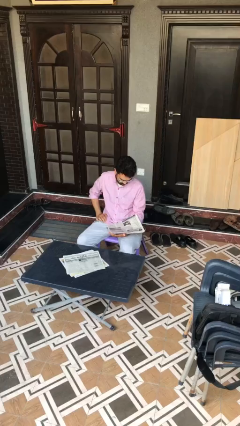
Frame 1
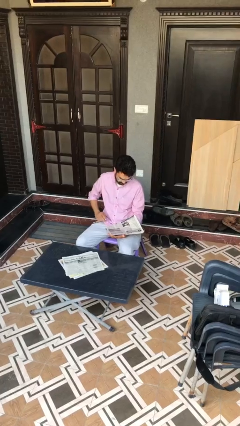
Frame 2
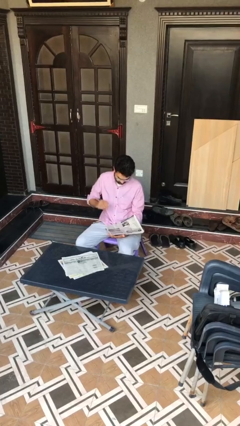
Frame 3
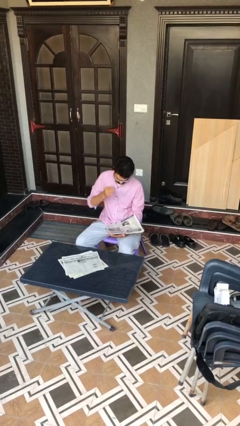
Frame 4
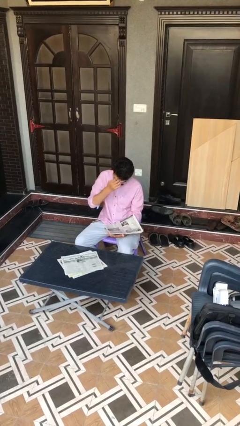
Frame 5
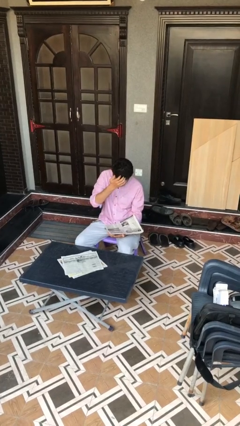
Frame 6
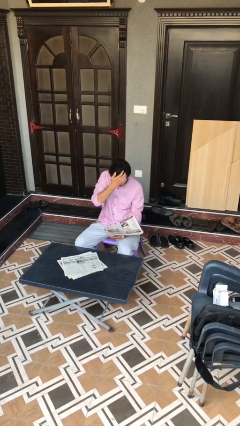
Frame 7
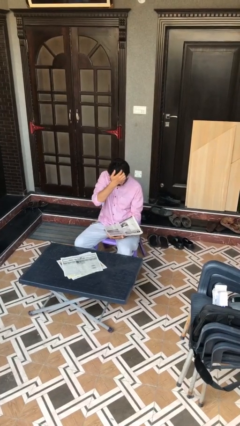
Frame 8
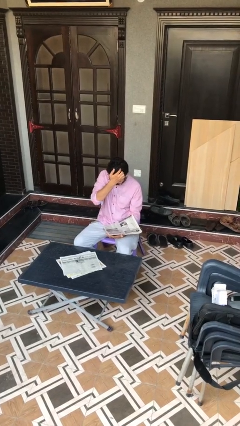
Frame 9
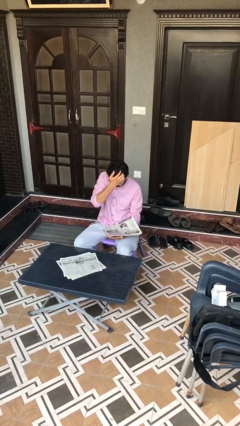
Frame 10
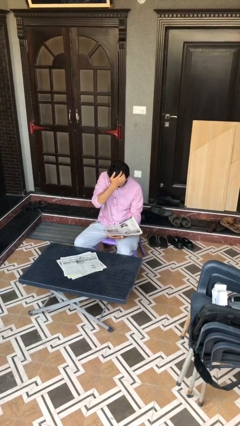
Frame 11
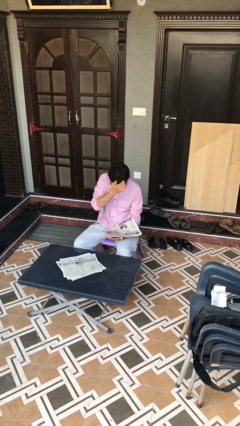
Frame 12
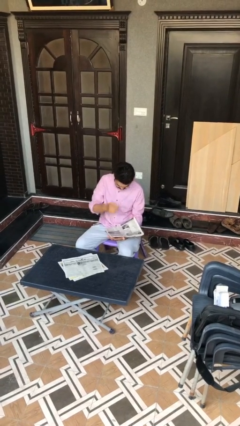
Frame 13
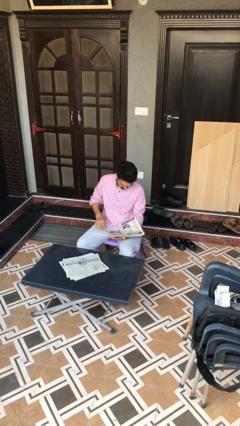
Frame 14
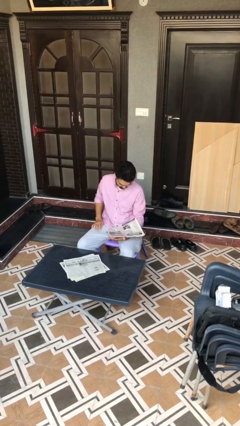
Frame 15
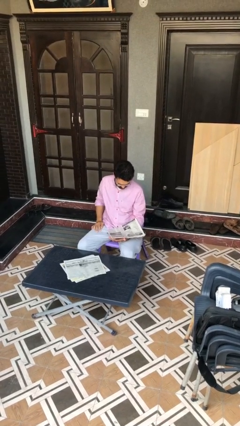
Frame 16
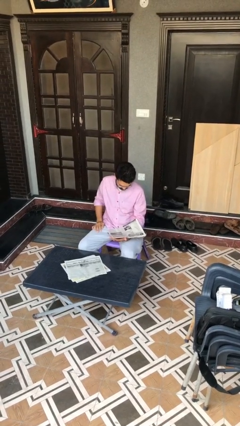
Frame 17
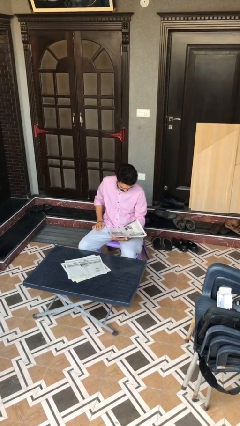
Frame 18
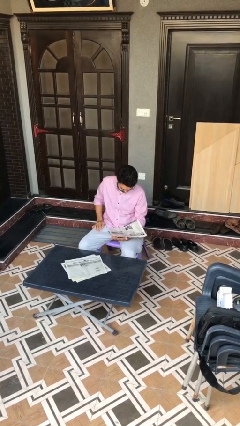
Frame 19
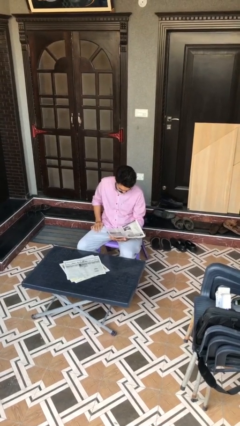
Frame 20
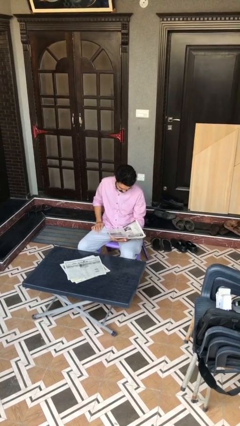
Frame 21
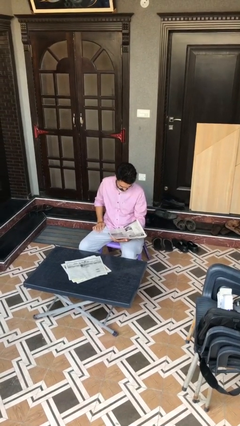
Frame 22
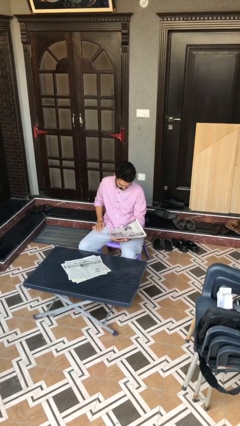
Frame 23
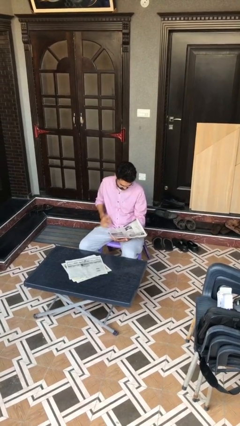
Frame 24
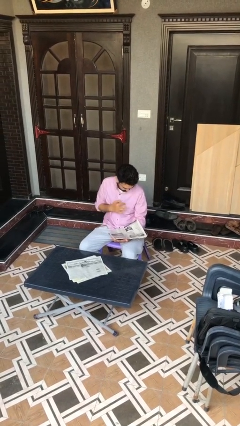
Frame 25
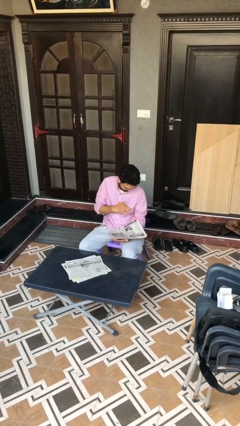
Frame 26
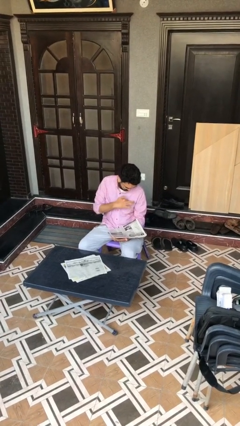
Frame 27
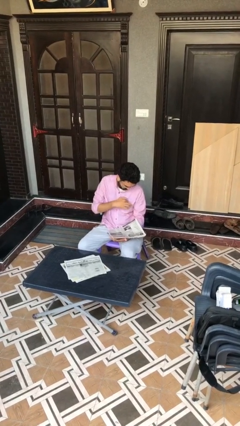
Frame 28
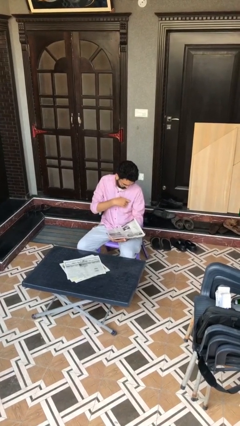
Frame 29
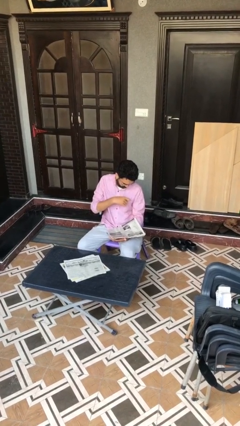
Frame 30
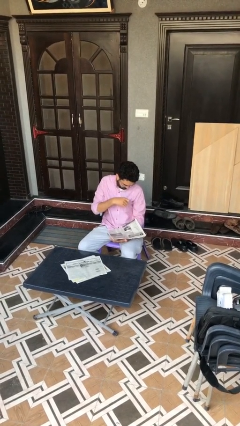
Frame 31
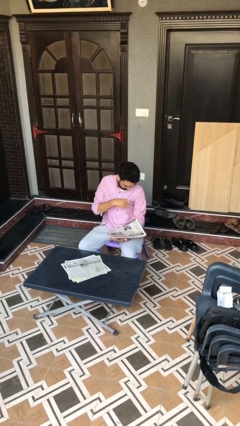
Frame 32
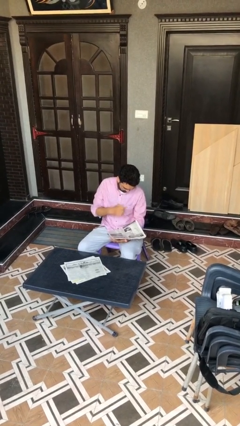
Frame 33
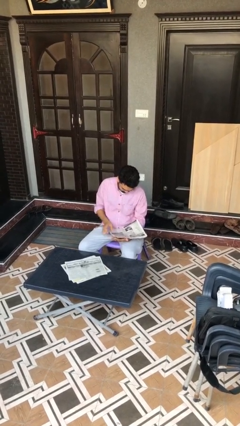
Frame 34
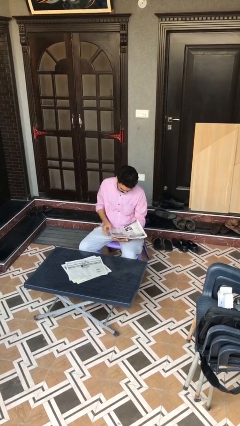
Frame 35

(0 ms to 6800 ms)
person reads document

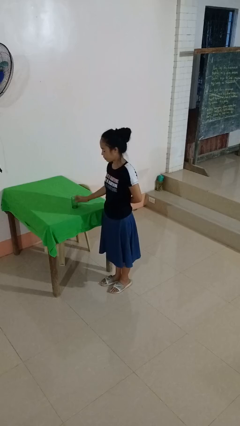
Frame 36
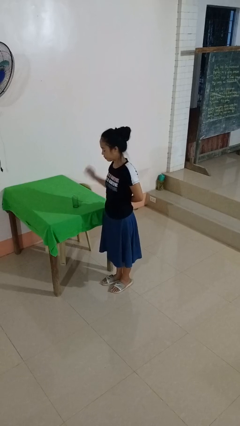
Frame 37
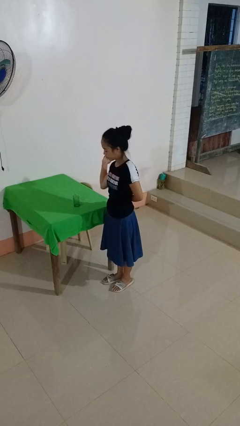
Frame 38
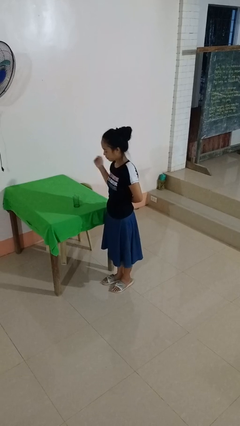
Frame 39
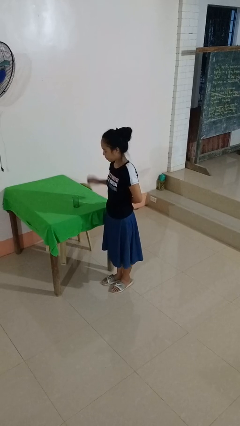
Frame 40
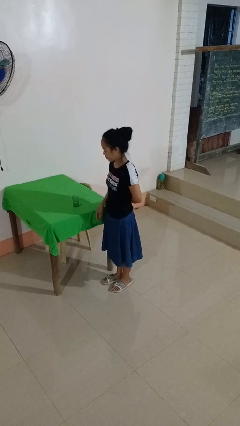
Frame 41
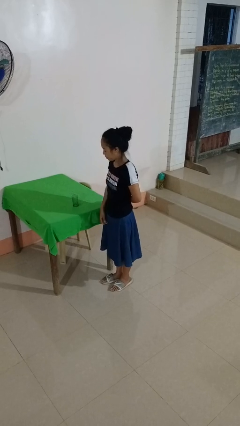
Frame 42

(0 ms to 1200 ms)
person sets upright glass

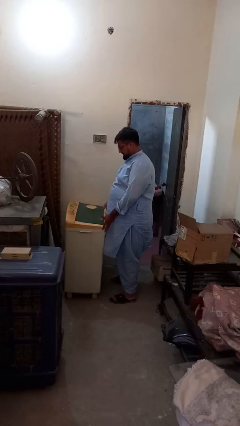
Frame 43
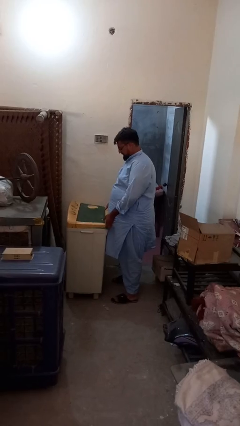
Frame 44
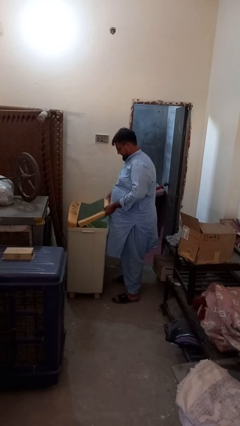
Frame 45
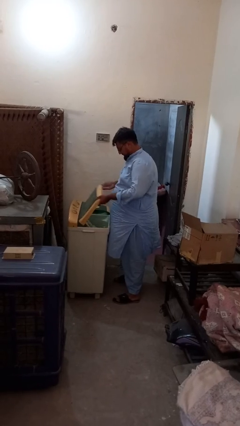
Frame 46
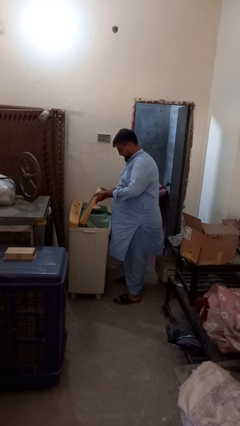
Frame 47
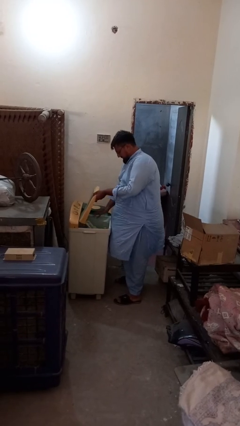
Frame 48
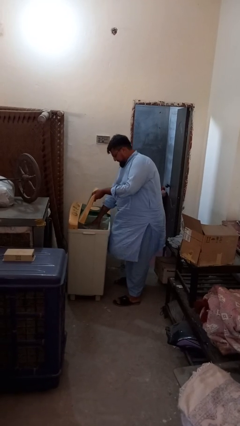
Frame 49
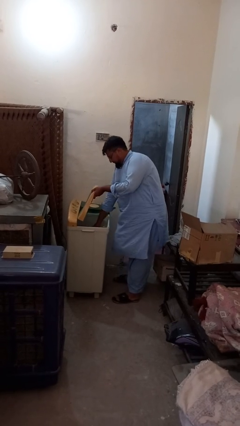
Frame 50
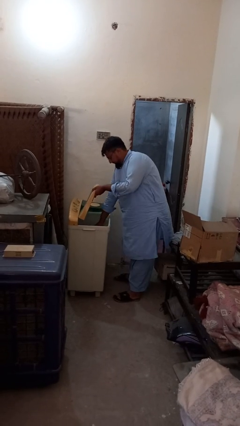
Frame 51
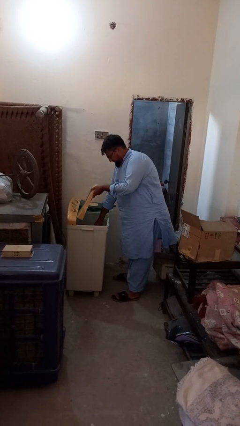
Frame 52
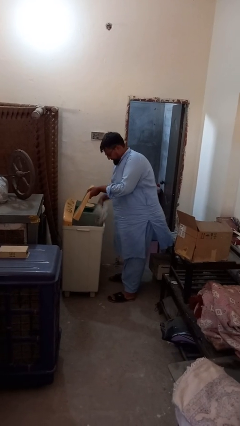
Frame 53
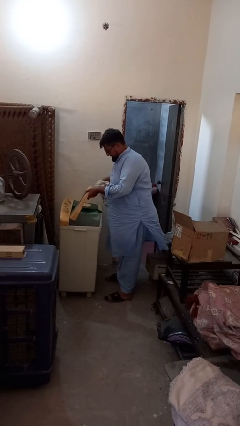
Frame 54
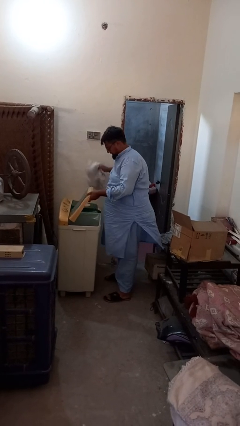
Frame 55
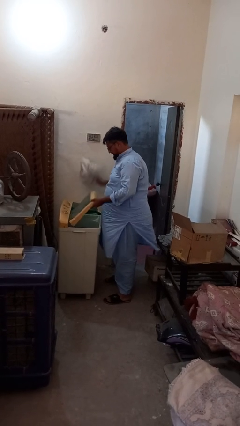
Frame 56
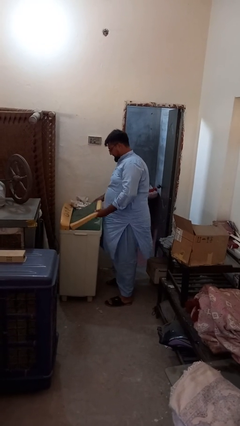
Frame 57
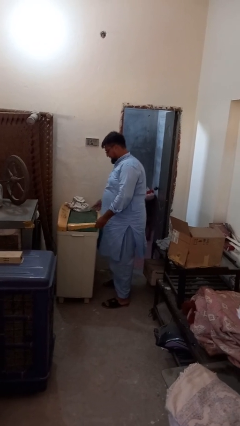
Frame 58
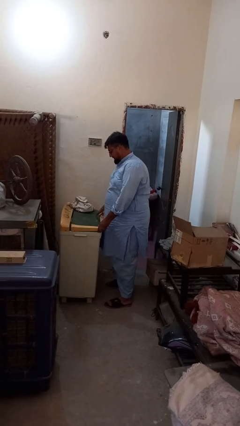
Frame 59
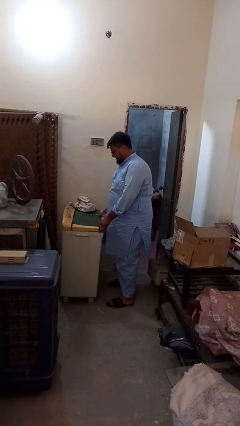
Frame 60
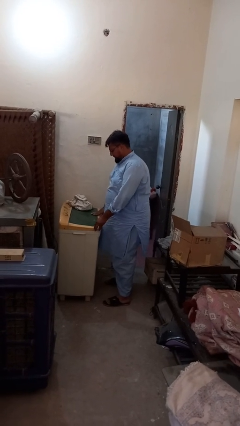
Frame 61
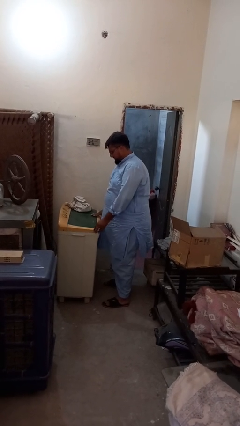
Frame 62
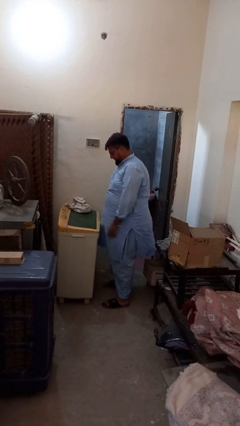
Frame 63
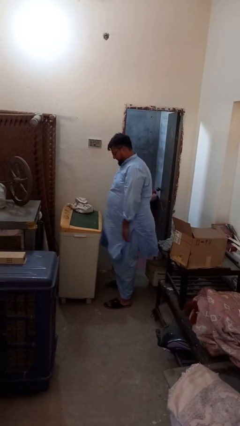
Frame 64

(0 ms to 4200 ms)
person unloads clotheswasher

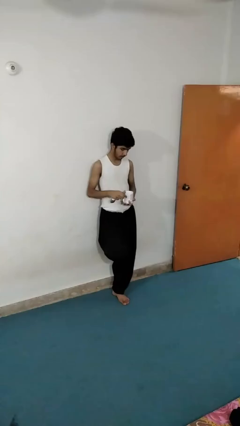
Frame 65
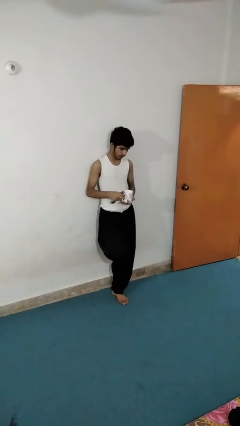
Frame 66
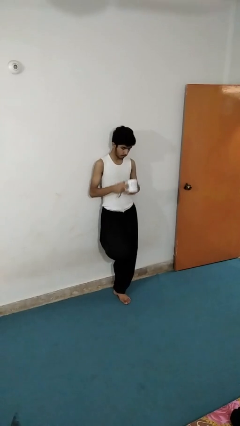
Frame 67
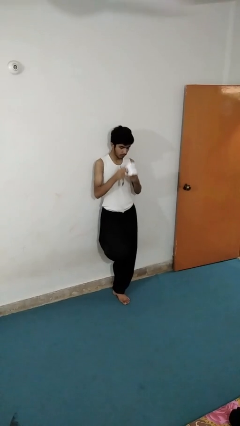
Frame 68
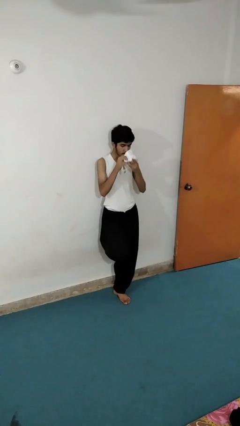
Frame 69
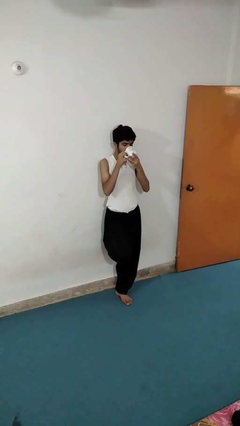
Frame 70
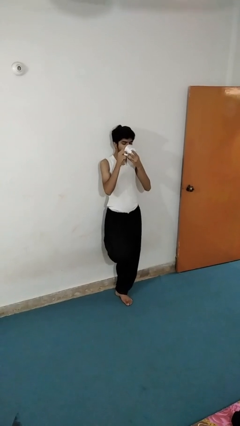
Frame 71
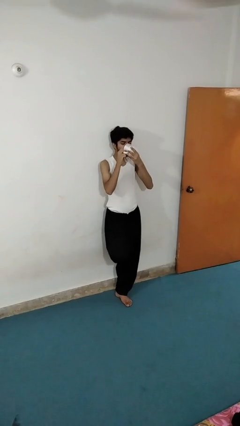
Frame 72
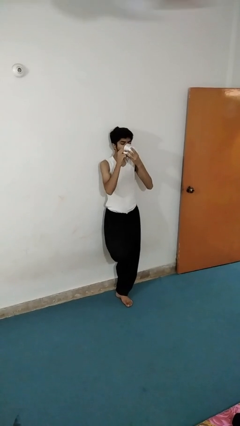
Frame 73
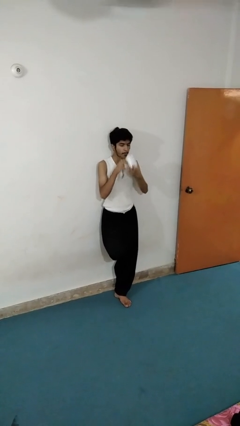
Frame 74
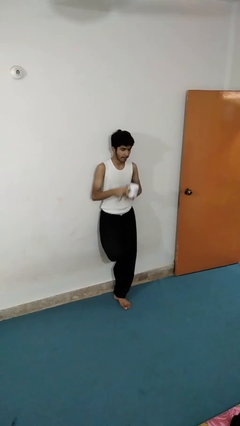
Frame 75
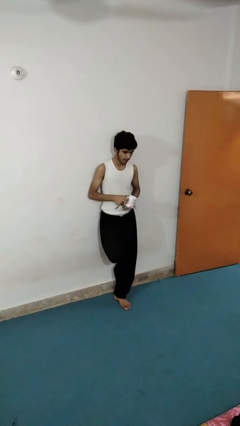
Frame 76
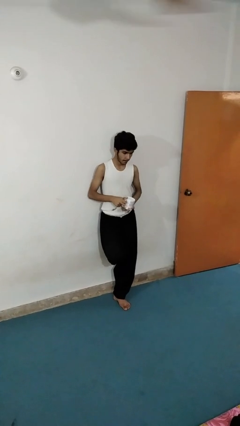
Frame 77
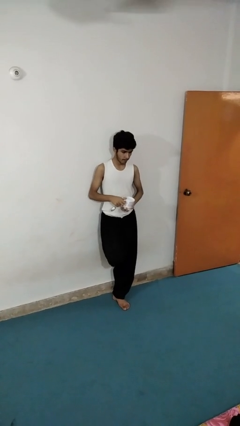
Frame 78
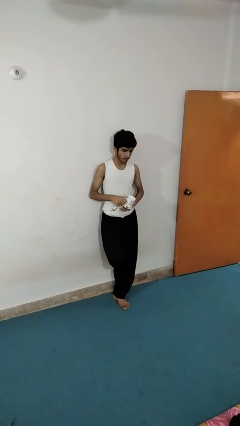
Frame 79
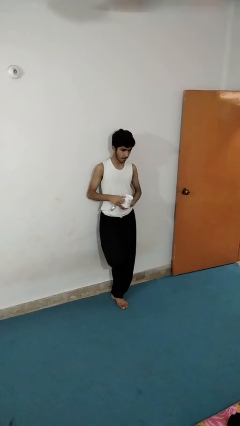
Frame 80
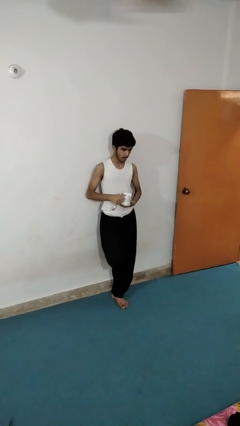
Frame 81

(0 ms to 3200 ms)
person drinks from mug

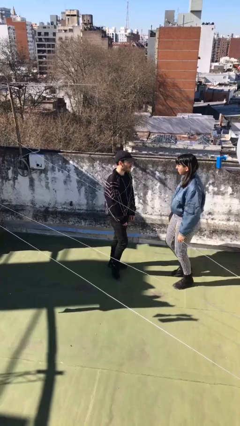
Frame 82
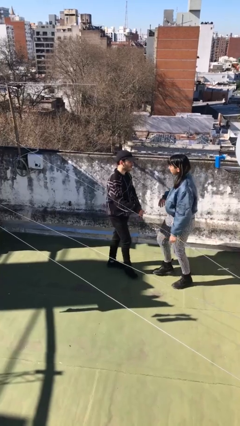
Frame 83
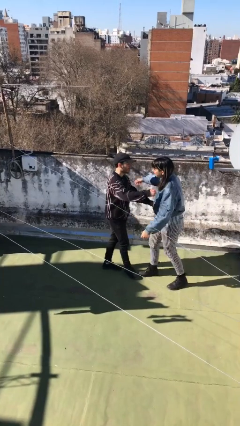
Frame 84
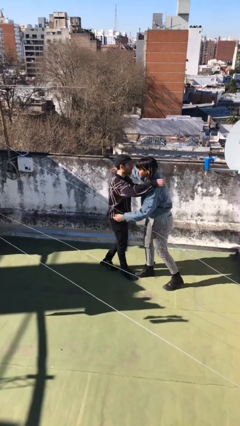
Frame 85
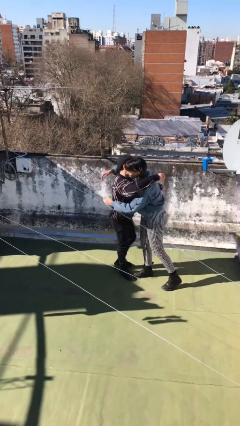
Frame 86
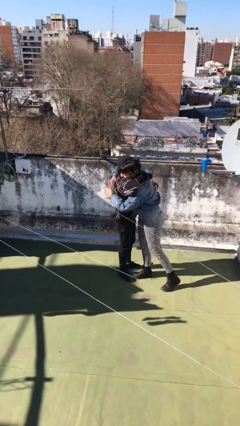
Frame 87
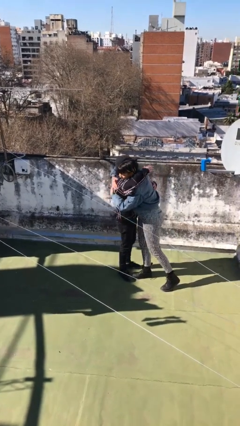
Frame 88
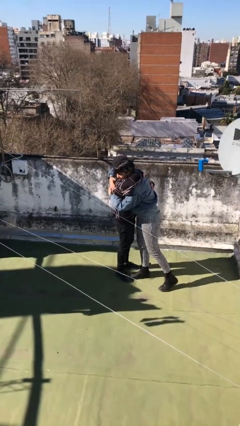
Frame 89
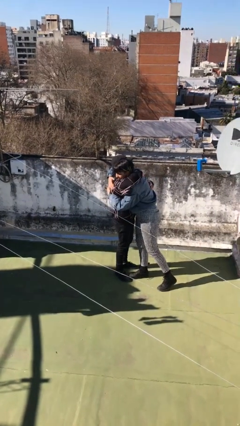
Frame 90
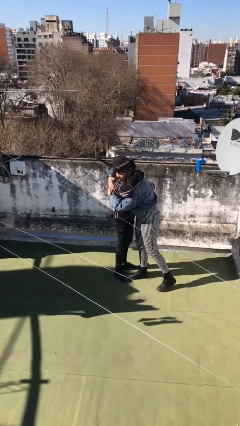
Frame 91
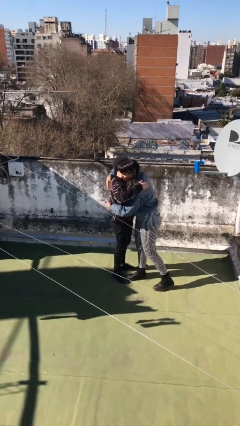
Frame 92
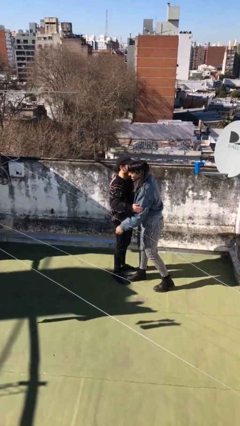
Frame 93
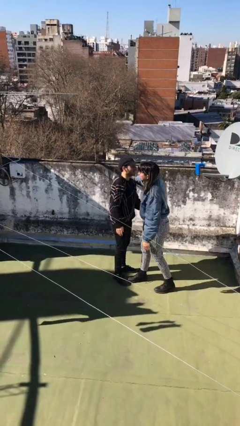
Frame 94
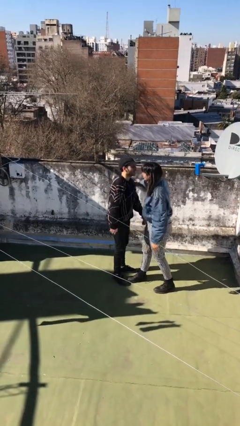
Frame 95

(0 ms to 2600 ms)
person embraces person
